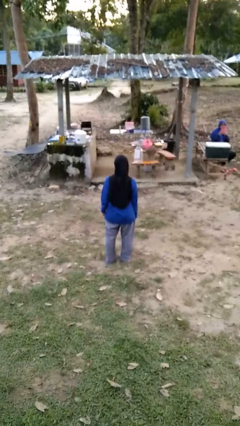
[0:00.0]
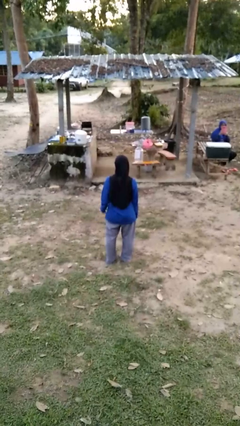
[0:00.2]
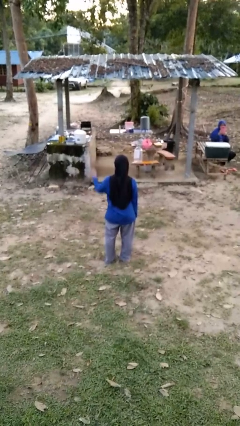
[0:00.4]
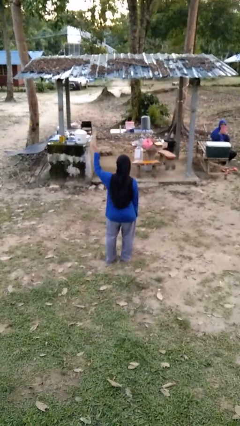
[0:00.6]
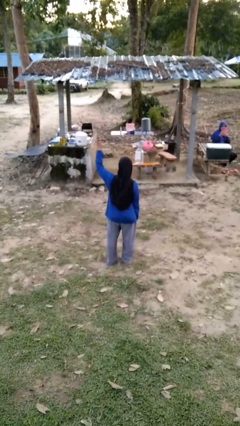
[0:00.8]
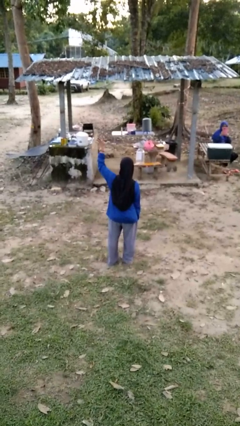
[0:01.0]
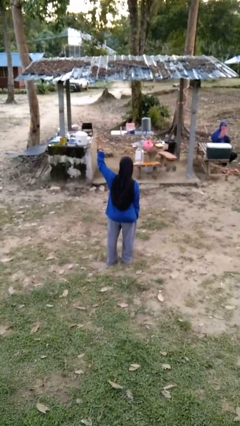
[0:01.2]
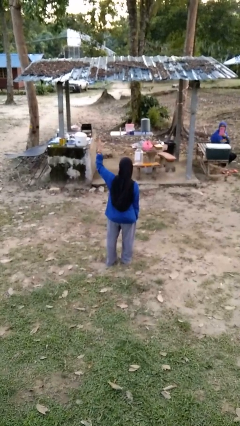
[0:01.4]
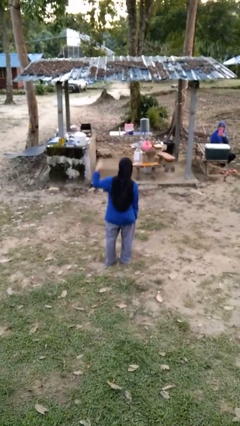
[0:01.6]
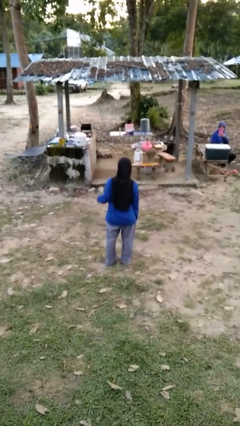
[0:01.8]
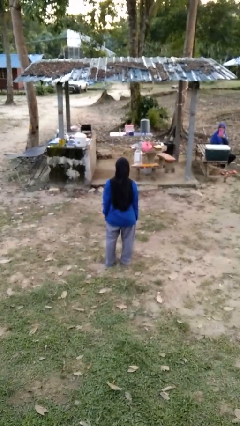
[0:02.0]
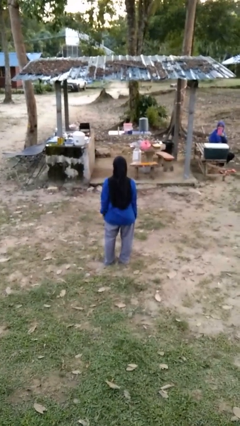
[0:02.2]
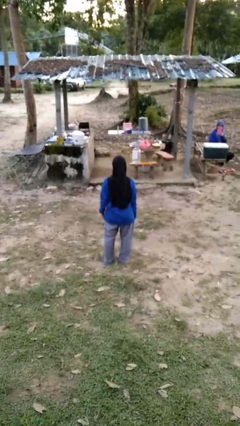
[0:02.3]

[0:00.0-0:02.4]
person gestures number five

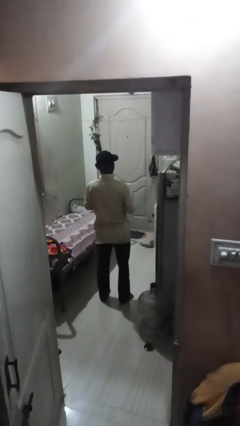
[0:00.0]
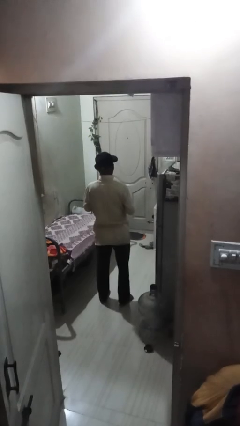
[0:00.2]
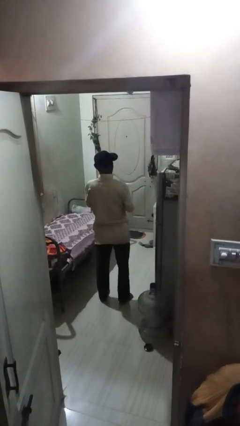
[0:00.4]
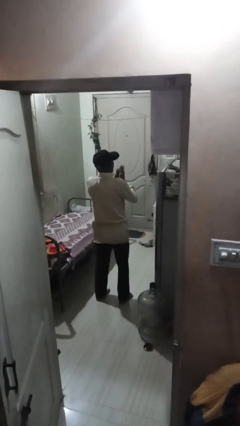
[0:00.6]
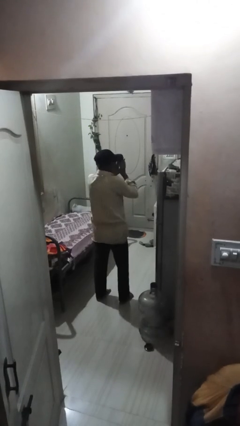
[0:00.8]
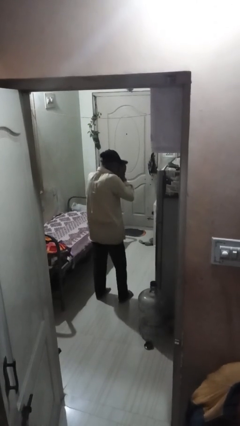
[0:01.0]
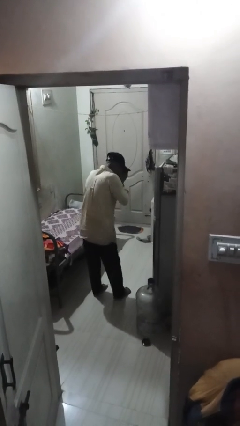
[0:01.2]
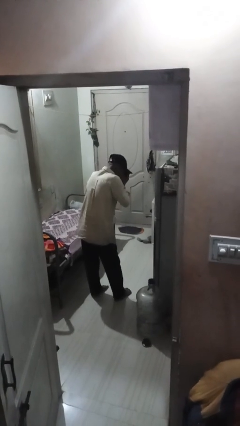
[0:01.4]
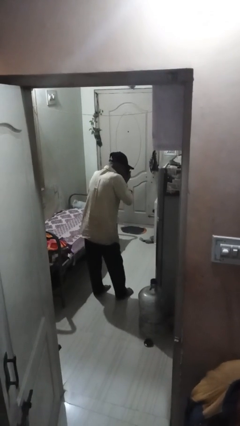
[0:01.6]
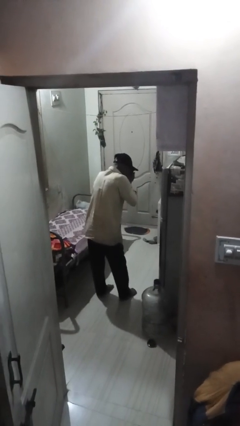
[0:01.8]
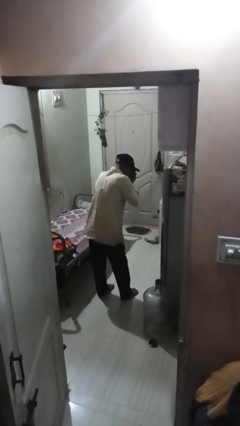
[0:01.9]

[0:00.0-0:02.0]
person sneezes into hand

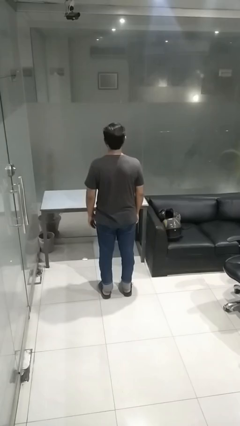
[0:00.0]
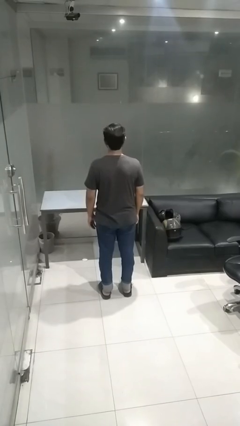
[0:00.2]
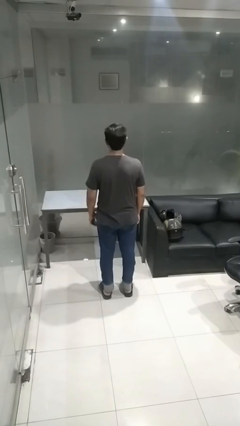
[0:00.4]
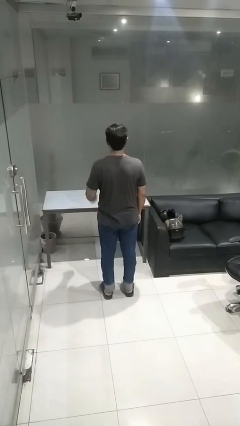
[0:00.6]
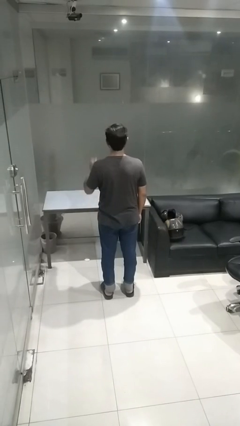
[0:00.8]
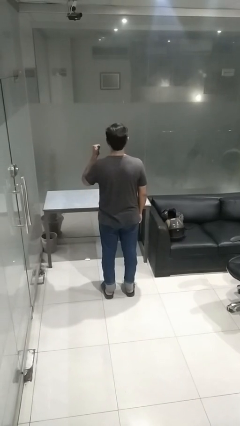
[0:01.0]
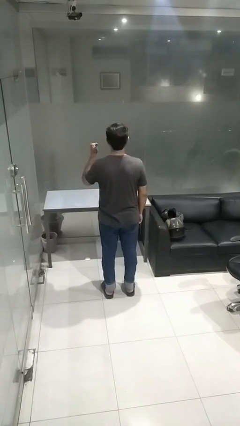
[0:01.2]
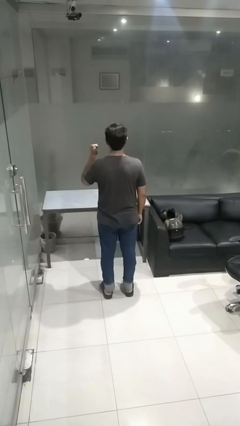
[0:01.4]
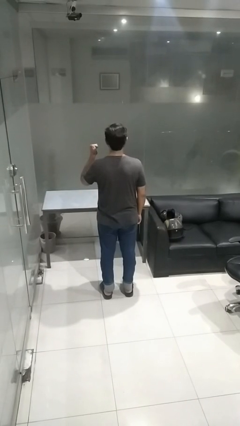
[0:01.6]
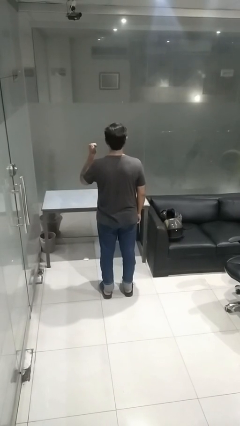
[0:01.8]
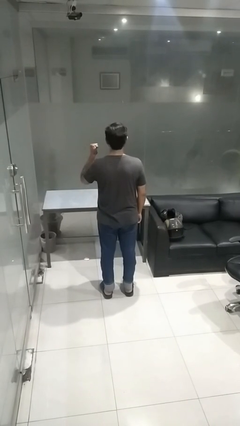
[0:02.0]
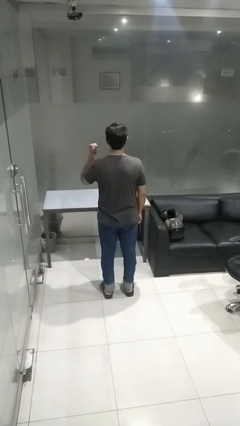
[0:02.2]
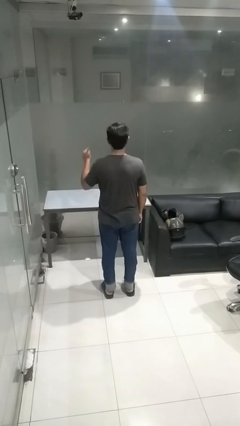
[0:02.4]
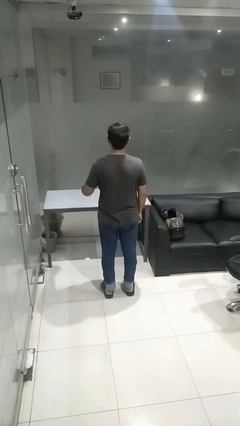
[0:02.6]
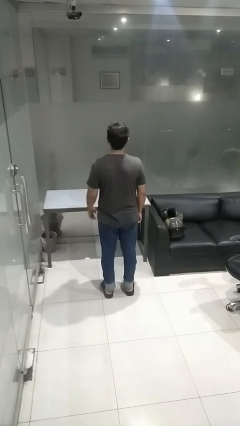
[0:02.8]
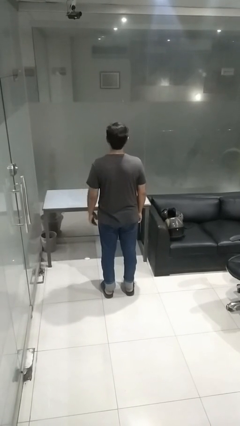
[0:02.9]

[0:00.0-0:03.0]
person gestures behind me

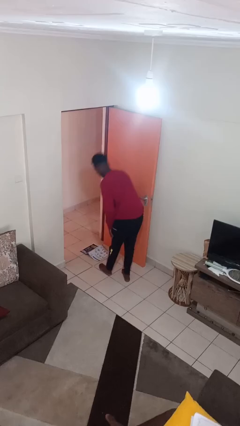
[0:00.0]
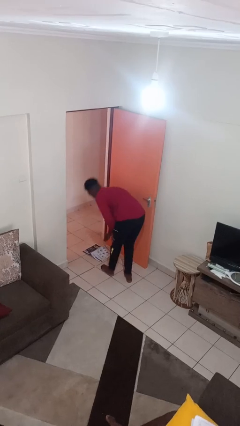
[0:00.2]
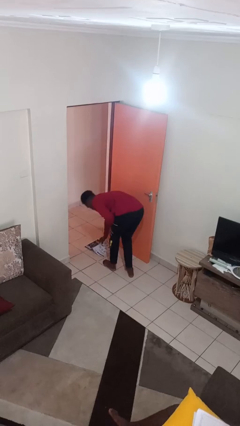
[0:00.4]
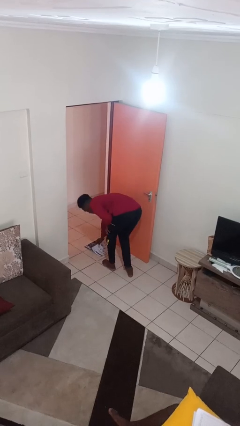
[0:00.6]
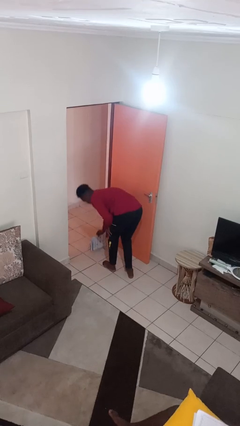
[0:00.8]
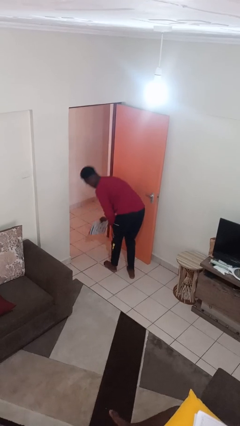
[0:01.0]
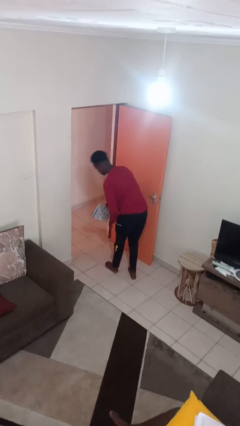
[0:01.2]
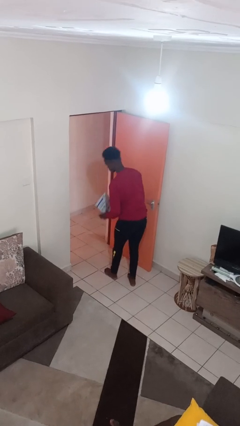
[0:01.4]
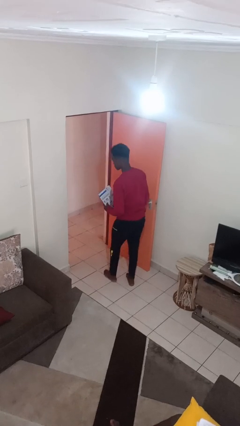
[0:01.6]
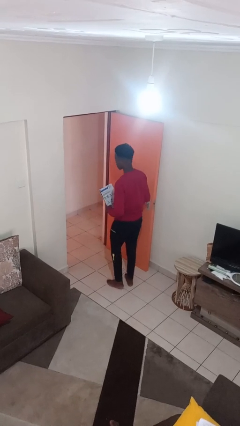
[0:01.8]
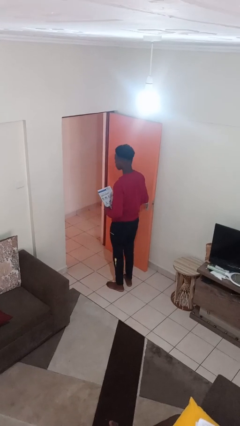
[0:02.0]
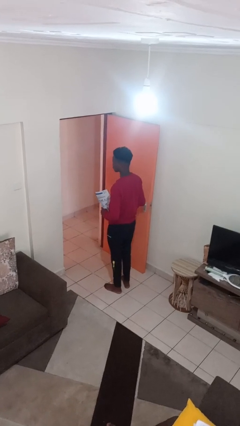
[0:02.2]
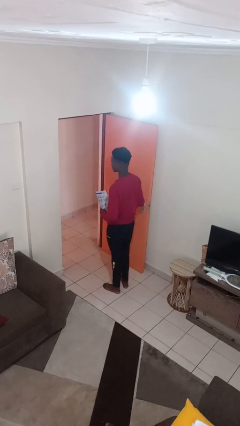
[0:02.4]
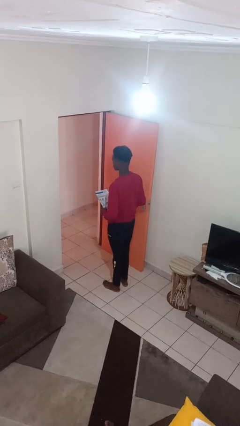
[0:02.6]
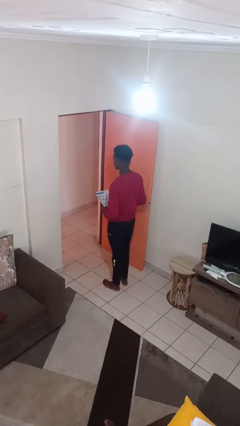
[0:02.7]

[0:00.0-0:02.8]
person picks up object from floor

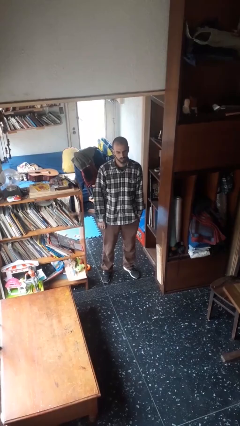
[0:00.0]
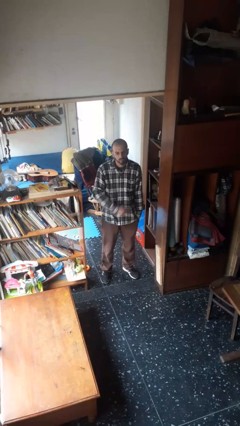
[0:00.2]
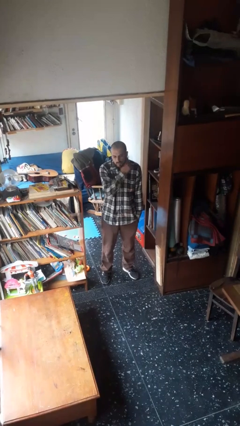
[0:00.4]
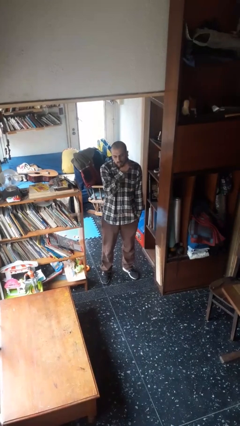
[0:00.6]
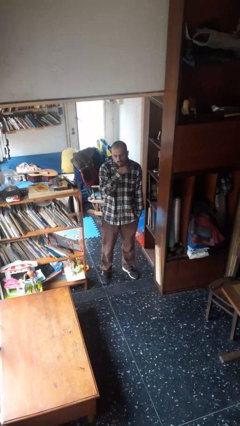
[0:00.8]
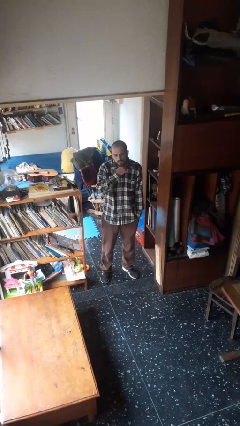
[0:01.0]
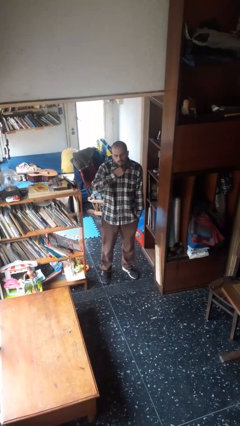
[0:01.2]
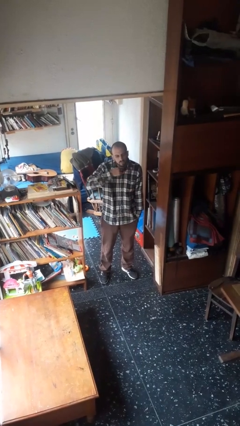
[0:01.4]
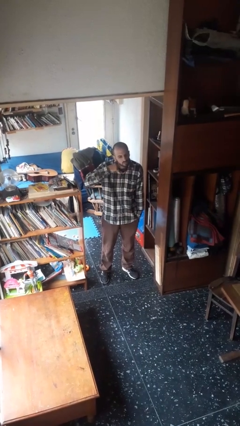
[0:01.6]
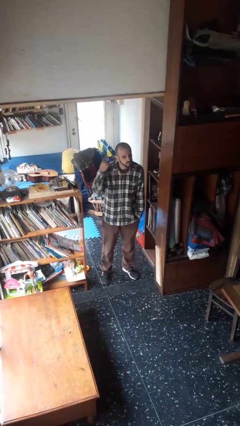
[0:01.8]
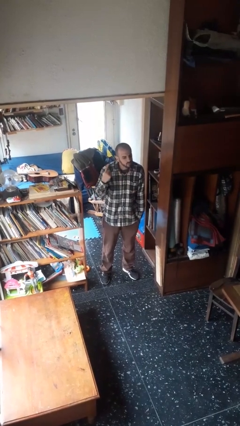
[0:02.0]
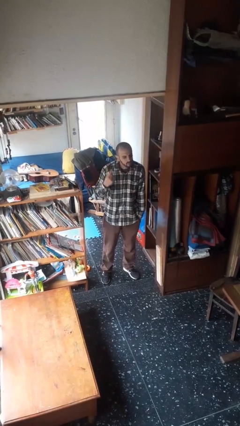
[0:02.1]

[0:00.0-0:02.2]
person gestures cut

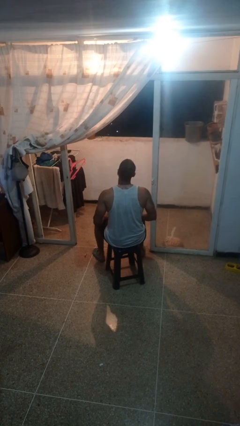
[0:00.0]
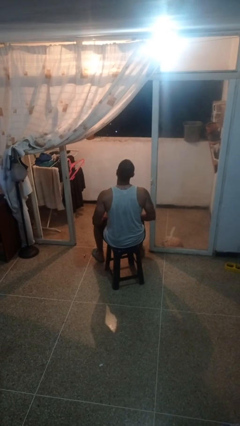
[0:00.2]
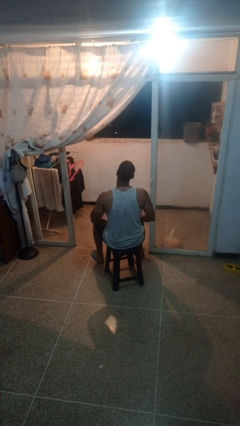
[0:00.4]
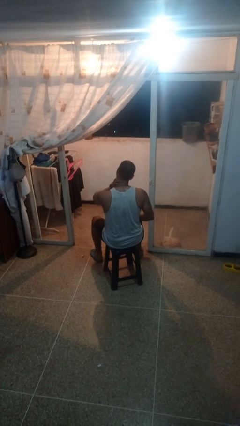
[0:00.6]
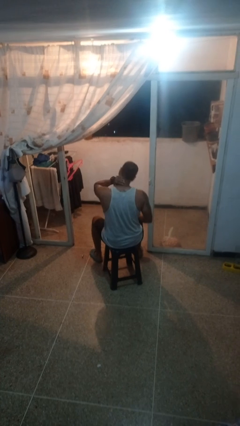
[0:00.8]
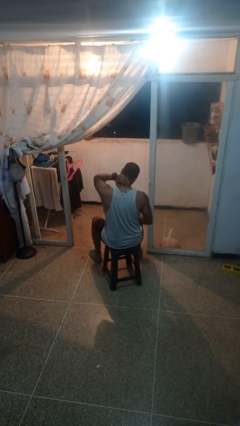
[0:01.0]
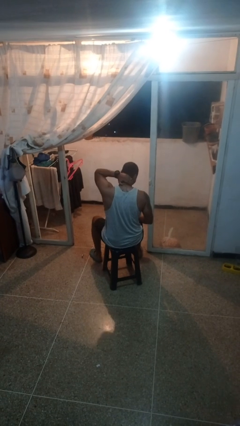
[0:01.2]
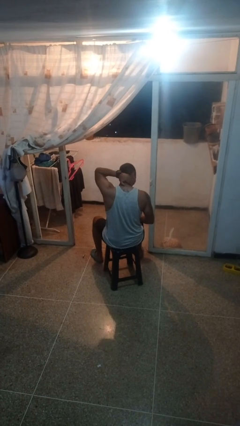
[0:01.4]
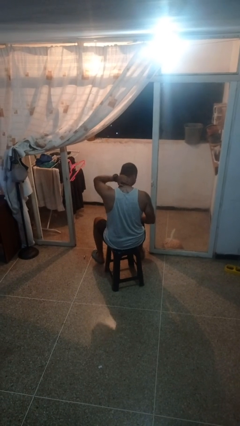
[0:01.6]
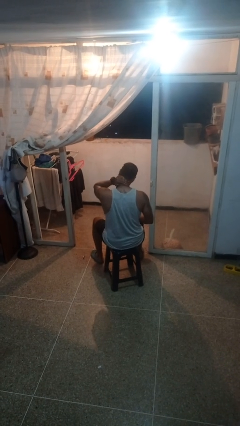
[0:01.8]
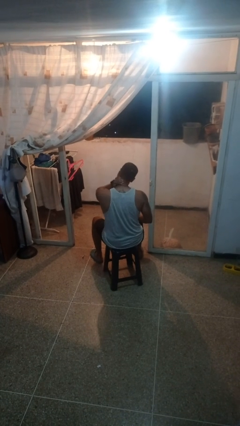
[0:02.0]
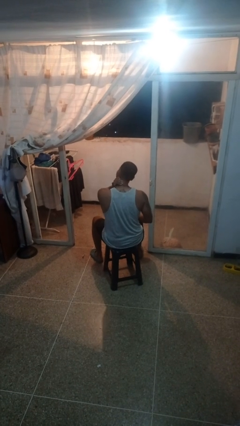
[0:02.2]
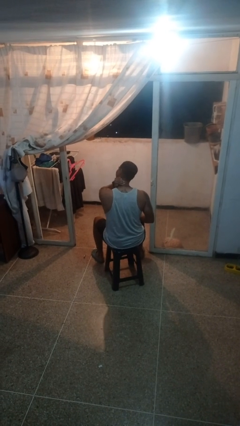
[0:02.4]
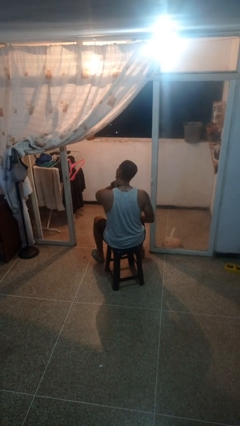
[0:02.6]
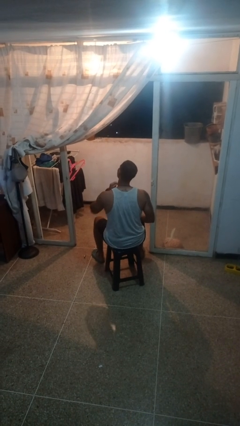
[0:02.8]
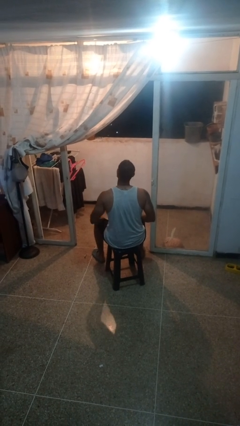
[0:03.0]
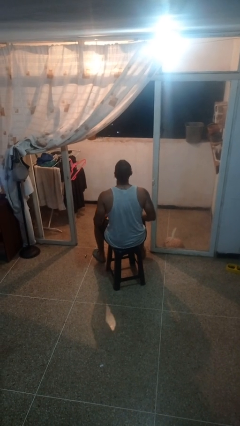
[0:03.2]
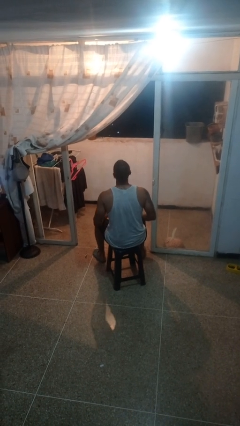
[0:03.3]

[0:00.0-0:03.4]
person rubs neck

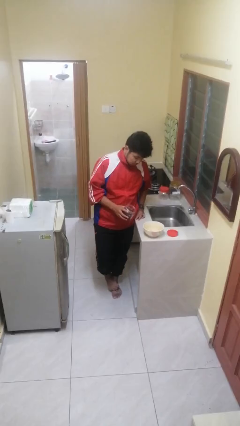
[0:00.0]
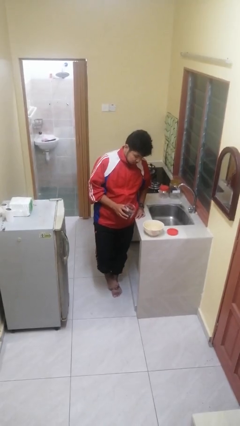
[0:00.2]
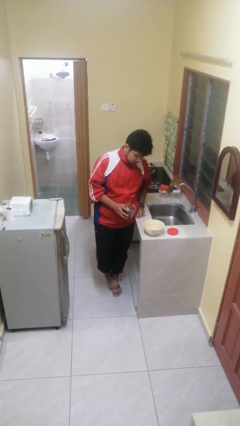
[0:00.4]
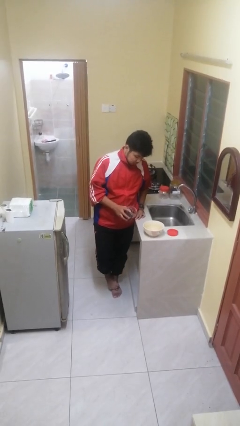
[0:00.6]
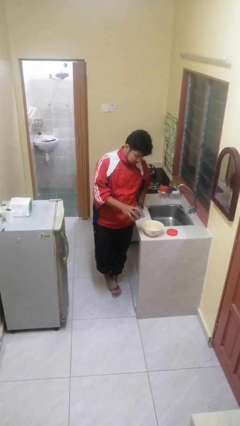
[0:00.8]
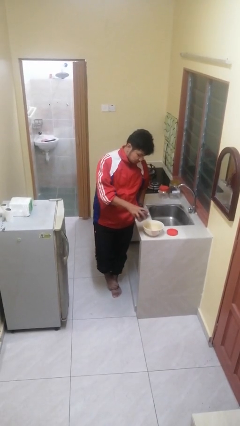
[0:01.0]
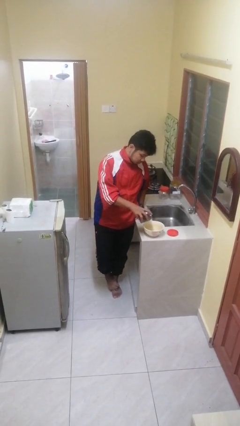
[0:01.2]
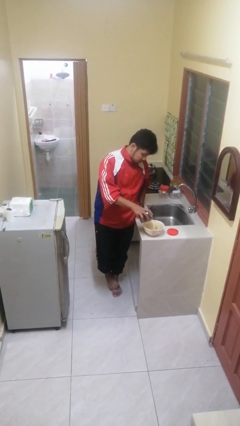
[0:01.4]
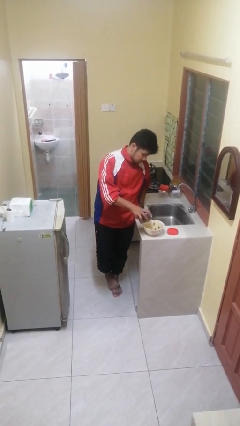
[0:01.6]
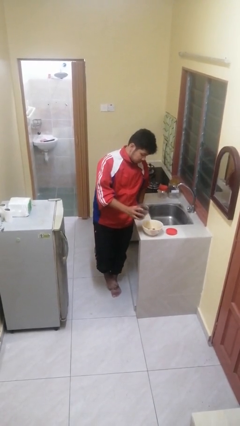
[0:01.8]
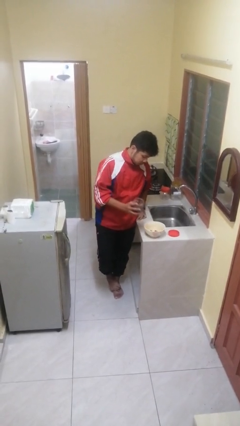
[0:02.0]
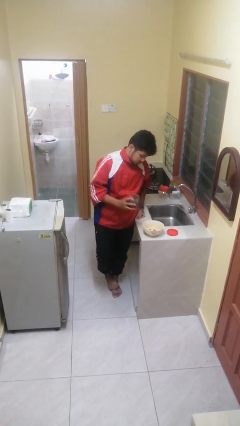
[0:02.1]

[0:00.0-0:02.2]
person pours into bowl
